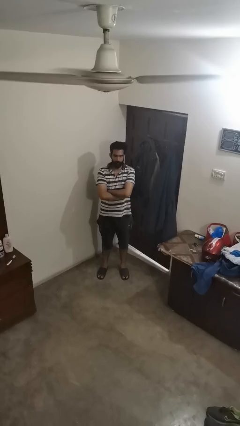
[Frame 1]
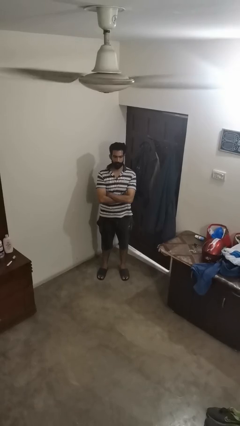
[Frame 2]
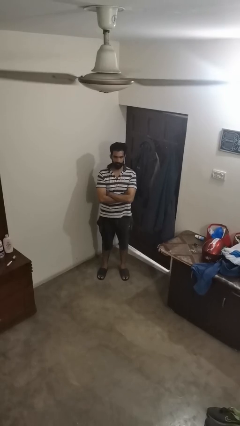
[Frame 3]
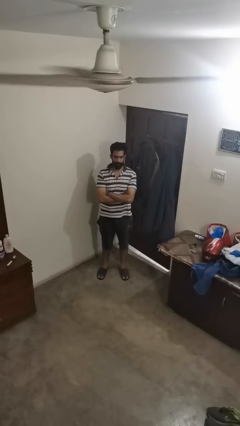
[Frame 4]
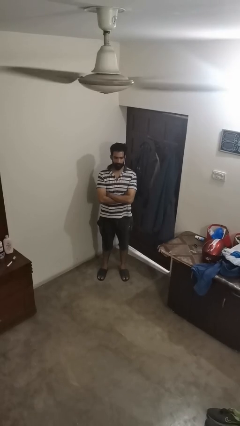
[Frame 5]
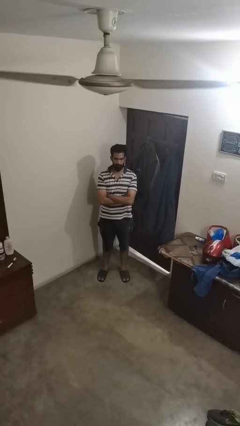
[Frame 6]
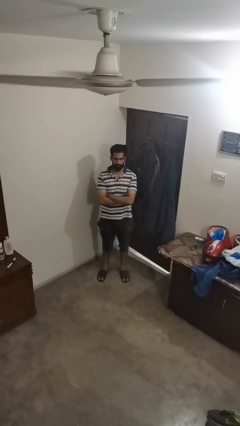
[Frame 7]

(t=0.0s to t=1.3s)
person crosses arms

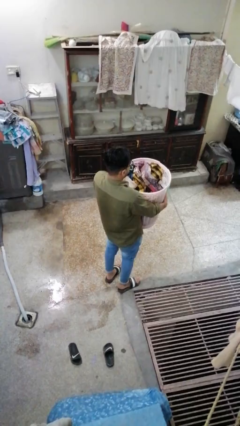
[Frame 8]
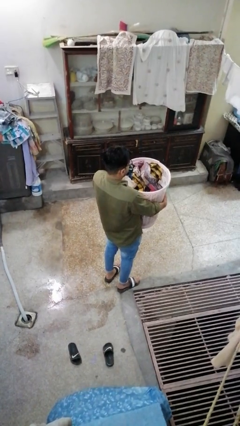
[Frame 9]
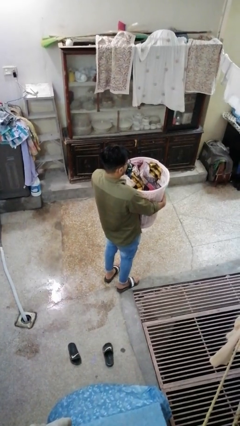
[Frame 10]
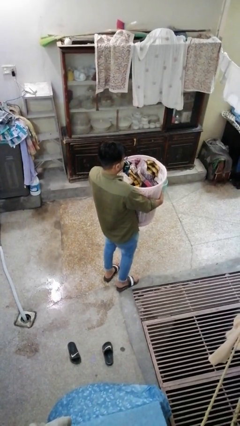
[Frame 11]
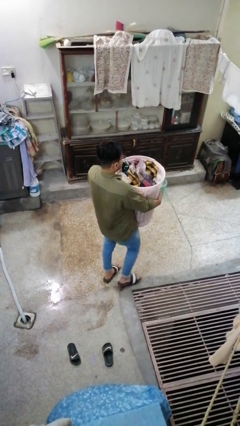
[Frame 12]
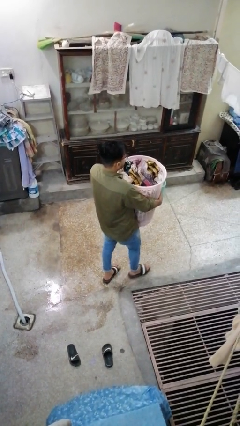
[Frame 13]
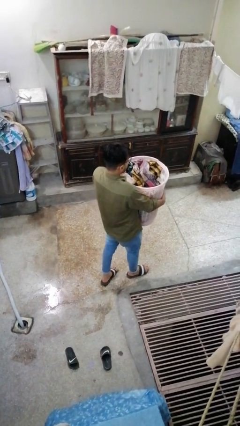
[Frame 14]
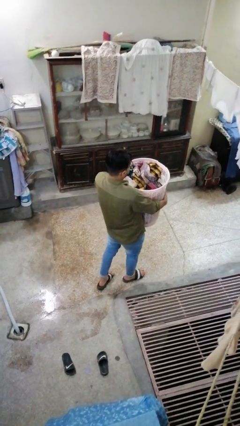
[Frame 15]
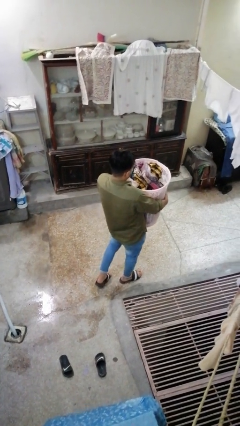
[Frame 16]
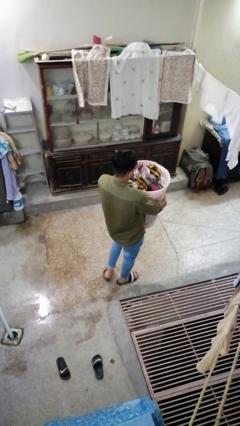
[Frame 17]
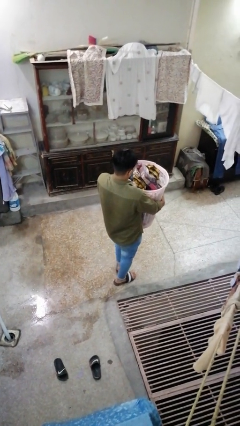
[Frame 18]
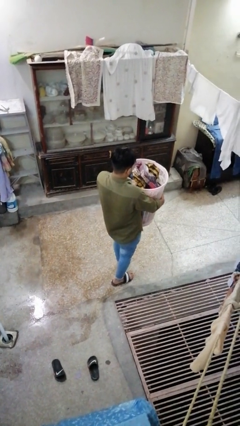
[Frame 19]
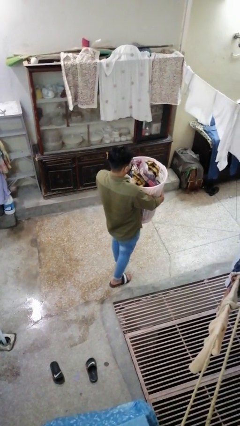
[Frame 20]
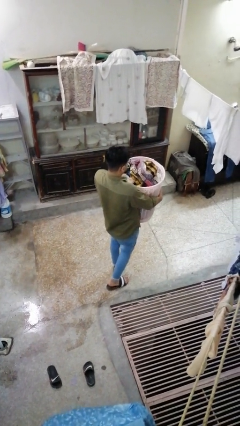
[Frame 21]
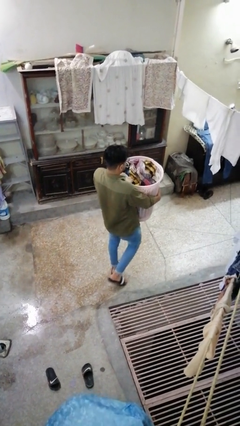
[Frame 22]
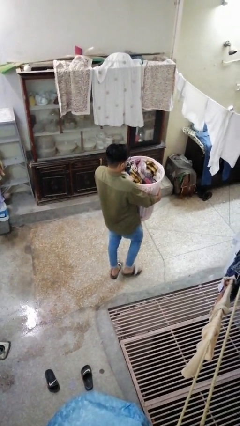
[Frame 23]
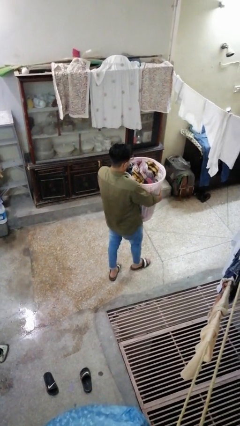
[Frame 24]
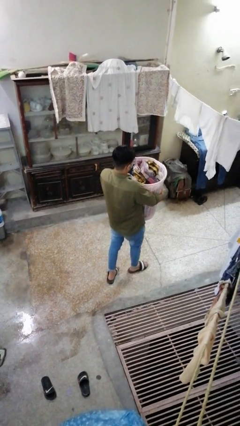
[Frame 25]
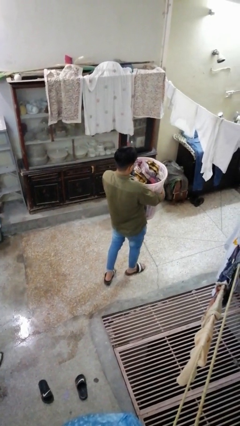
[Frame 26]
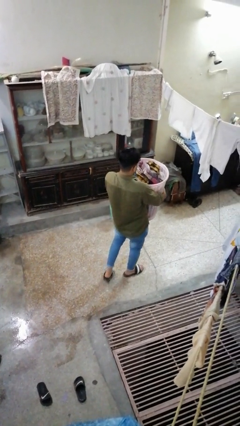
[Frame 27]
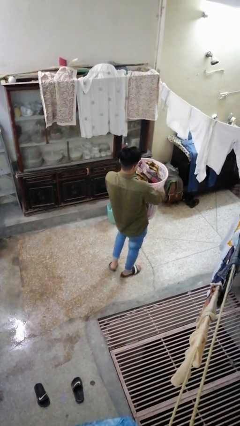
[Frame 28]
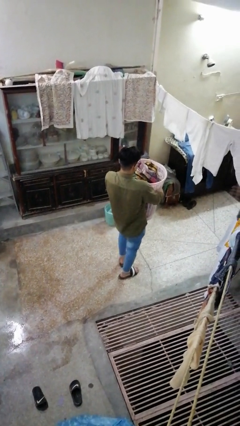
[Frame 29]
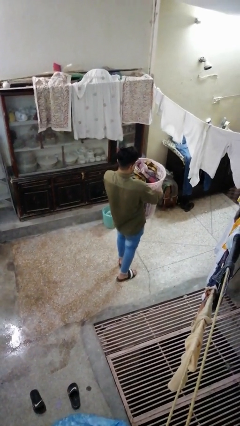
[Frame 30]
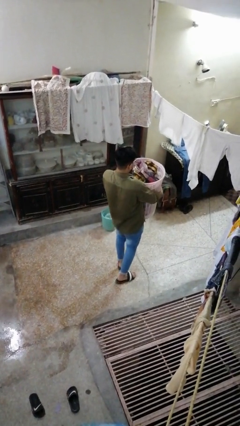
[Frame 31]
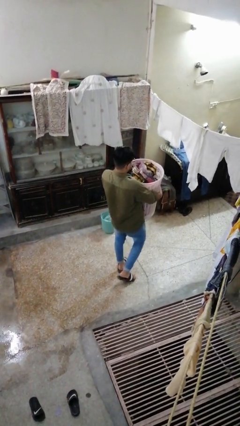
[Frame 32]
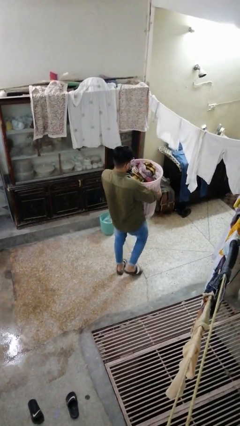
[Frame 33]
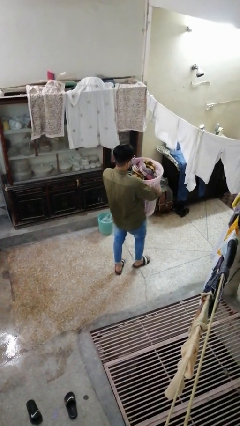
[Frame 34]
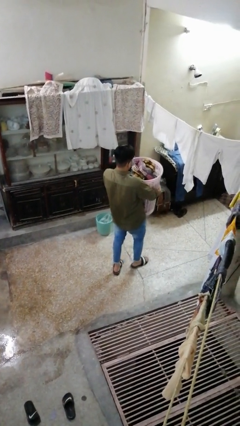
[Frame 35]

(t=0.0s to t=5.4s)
person carries laundry basket

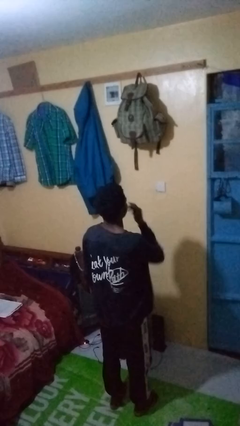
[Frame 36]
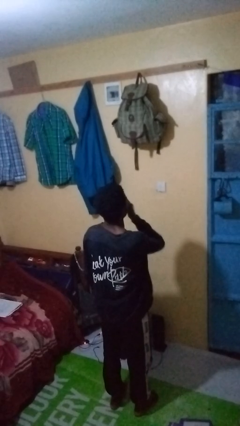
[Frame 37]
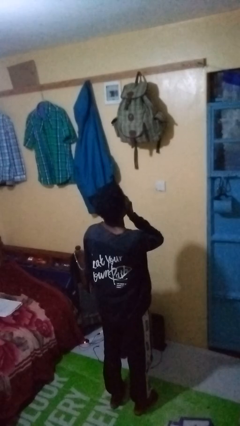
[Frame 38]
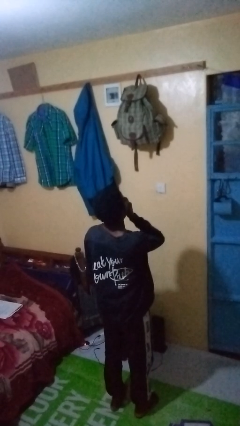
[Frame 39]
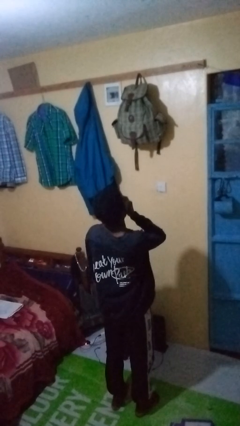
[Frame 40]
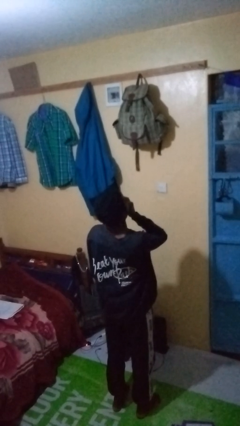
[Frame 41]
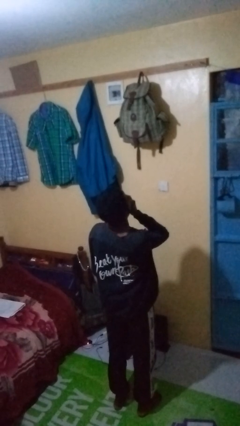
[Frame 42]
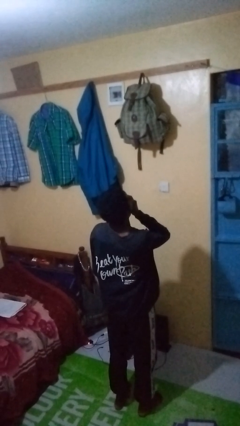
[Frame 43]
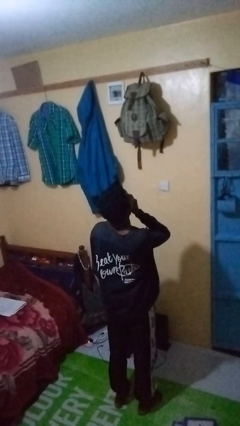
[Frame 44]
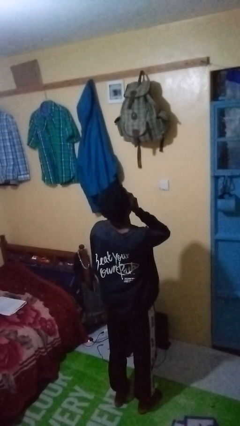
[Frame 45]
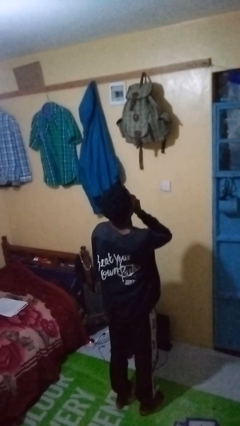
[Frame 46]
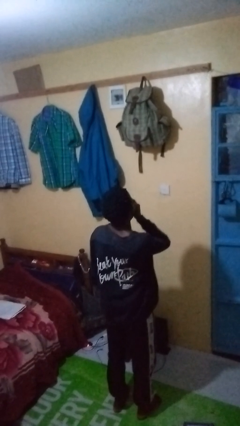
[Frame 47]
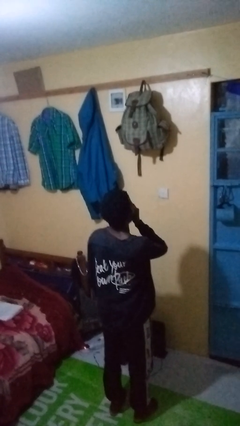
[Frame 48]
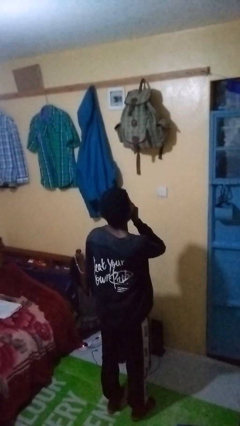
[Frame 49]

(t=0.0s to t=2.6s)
person yawns

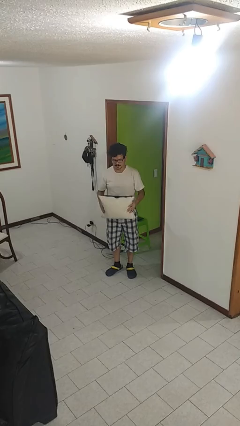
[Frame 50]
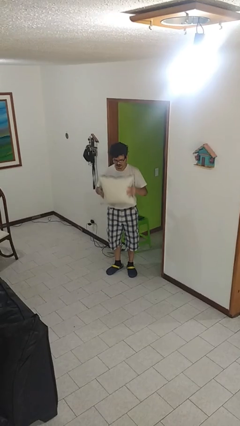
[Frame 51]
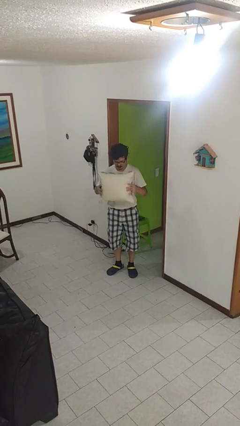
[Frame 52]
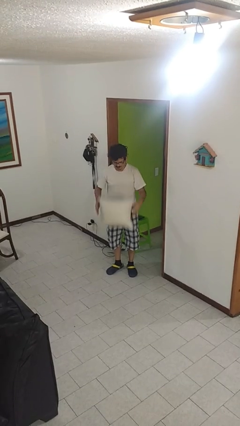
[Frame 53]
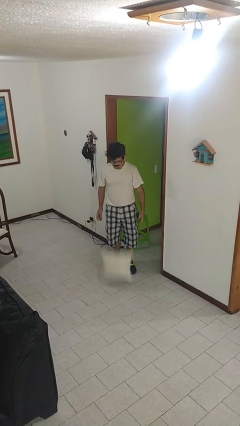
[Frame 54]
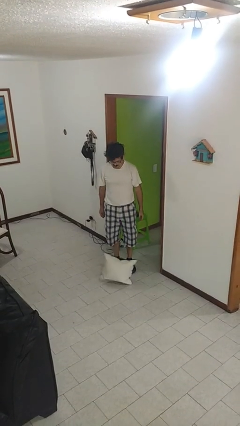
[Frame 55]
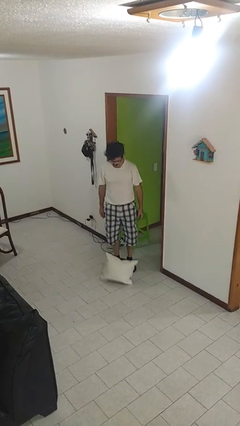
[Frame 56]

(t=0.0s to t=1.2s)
person throws object into air

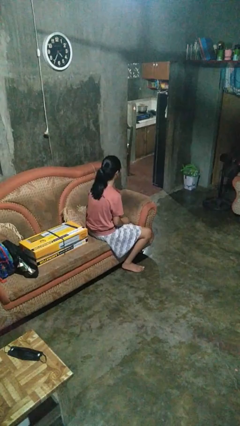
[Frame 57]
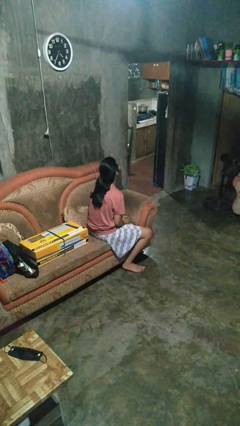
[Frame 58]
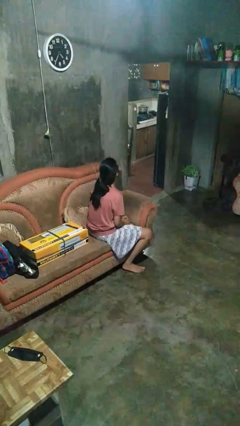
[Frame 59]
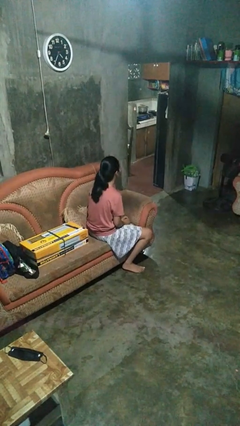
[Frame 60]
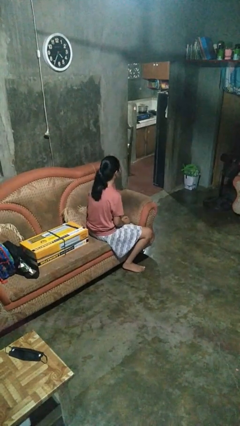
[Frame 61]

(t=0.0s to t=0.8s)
person nods head

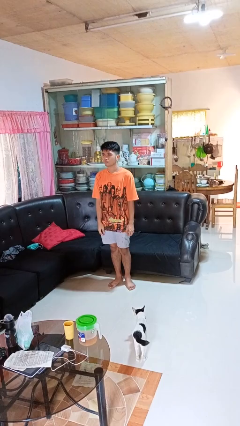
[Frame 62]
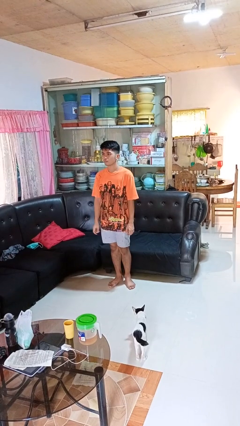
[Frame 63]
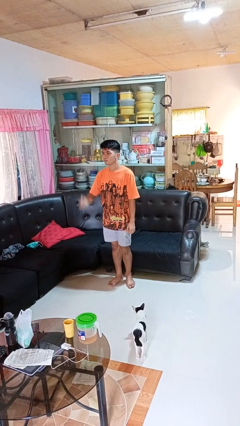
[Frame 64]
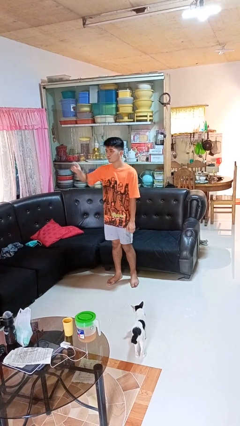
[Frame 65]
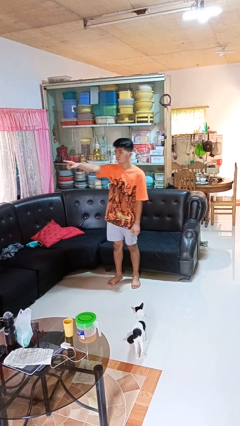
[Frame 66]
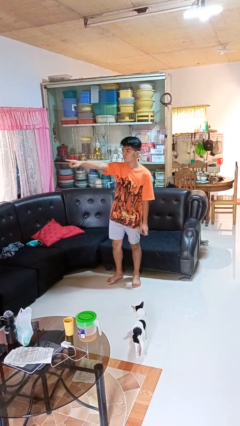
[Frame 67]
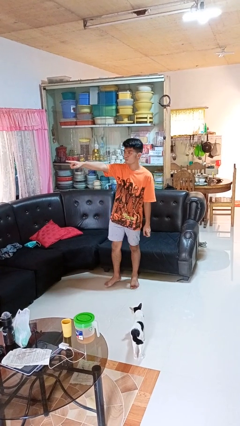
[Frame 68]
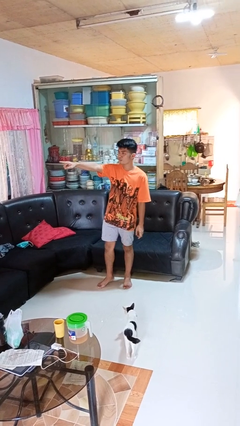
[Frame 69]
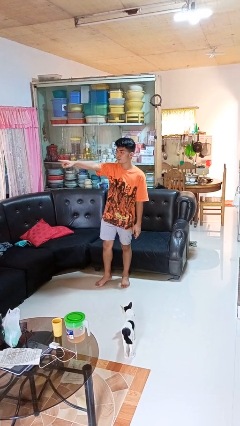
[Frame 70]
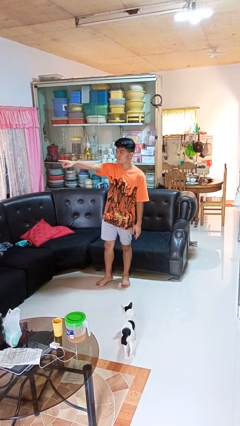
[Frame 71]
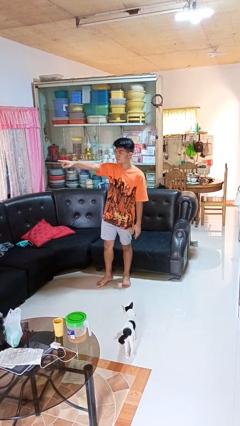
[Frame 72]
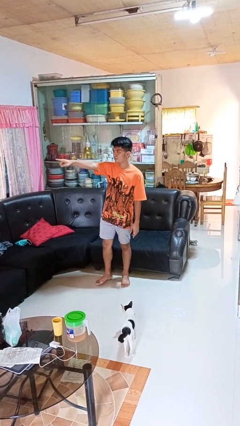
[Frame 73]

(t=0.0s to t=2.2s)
person points at person

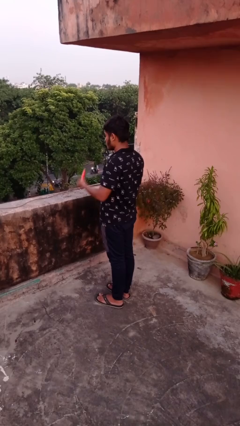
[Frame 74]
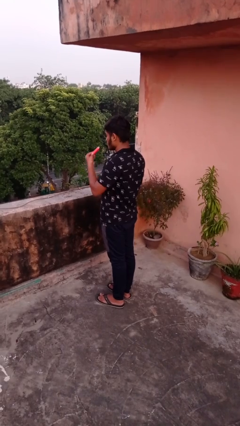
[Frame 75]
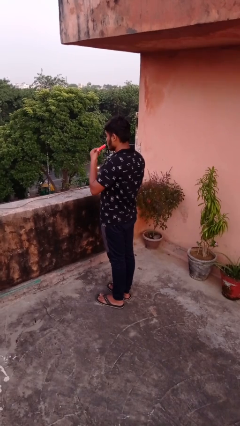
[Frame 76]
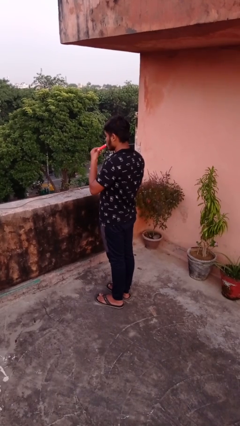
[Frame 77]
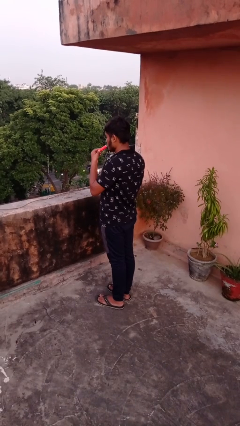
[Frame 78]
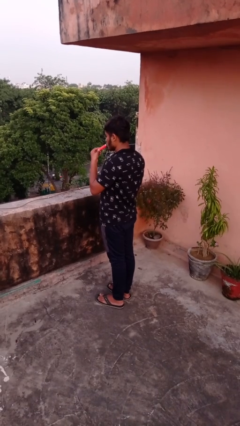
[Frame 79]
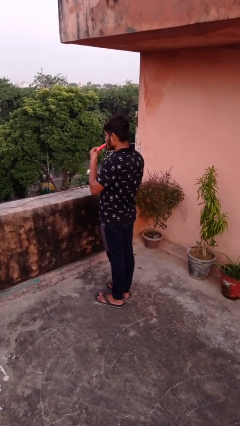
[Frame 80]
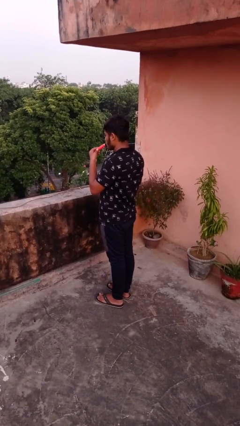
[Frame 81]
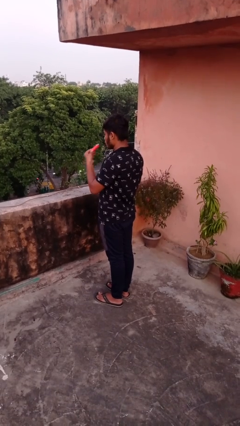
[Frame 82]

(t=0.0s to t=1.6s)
person vapes

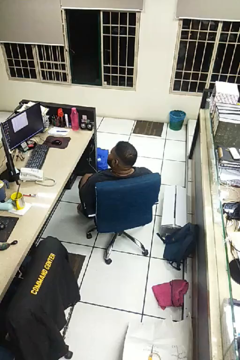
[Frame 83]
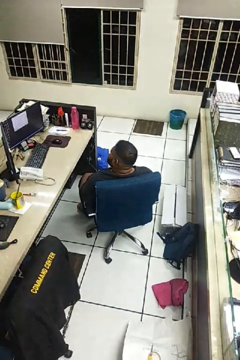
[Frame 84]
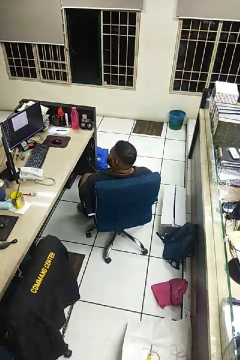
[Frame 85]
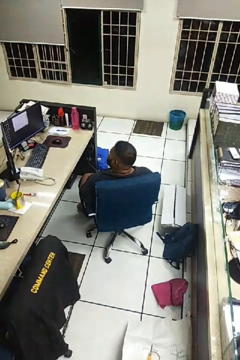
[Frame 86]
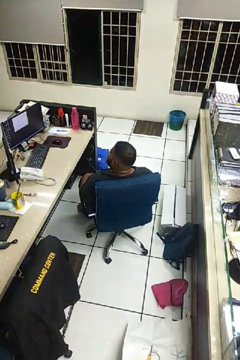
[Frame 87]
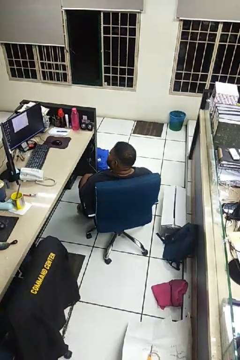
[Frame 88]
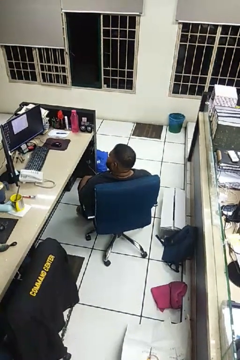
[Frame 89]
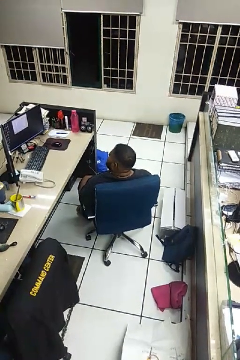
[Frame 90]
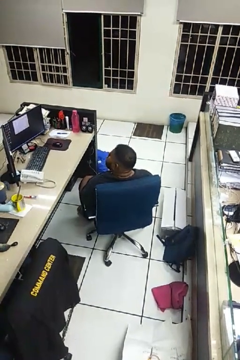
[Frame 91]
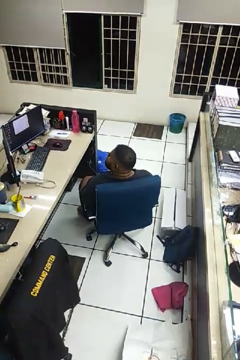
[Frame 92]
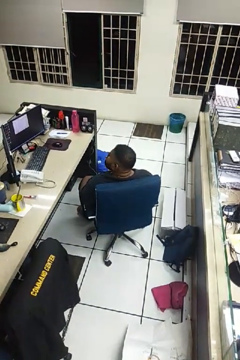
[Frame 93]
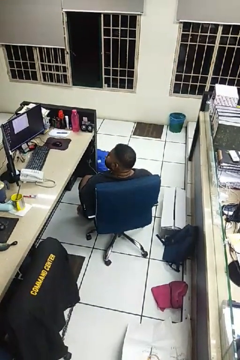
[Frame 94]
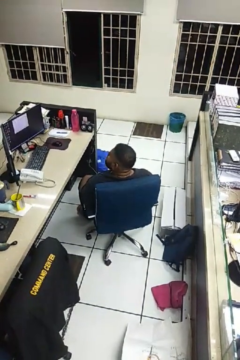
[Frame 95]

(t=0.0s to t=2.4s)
person sticks out tongue
